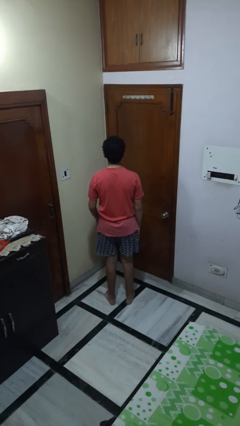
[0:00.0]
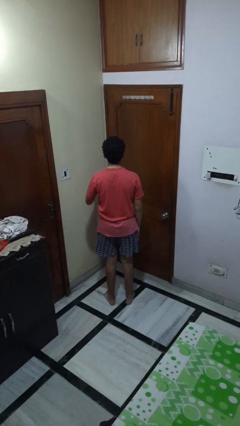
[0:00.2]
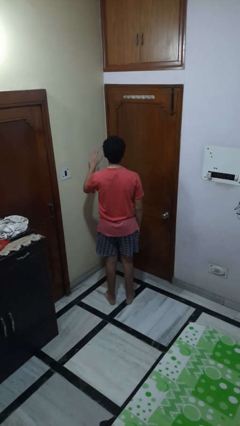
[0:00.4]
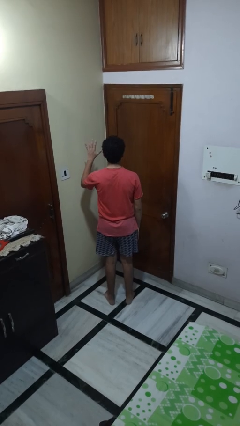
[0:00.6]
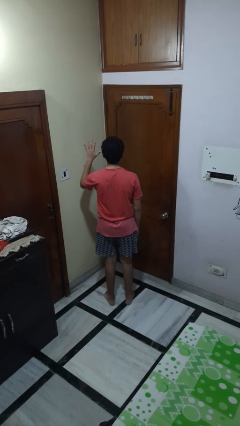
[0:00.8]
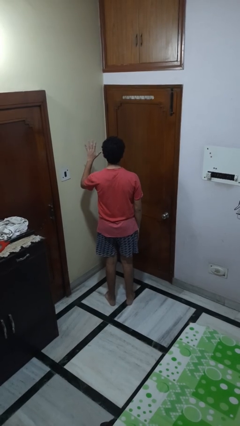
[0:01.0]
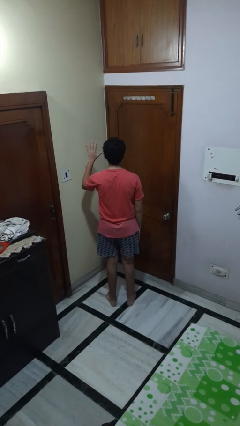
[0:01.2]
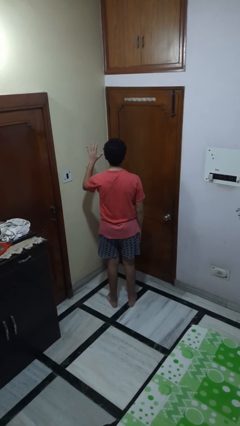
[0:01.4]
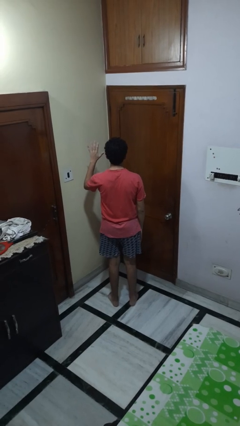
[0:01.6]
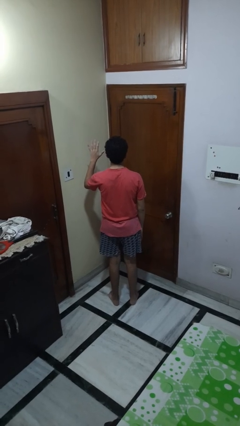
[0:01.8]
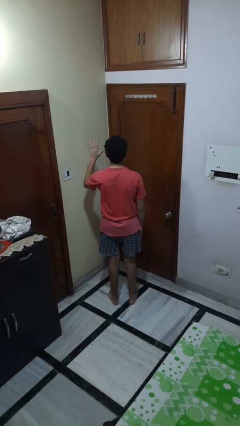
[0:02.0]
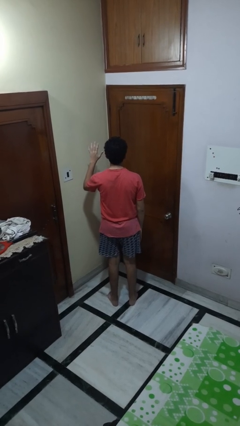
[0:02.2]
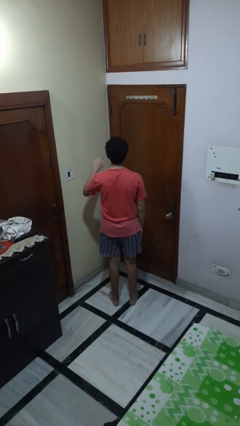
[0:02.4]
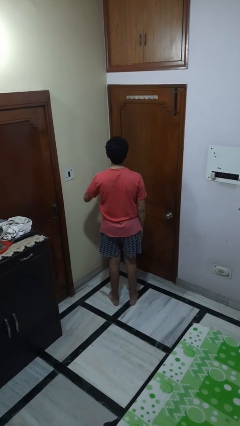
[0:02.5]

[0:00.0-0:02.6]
person gestures number five

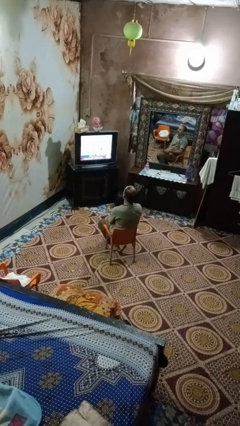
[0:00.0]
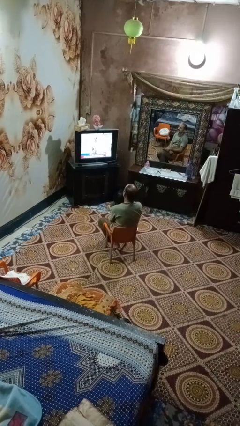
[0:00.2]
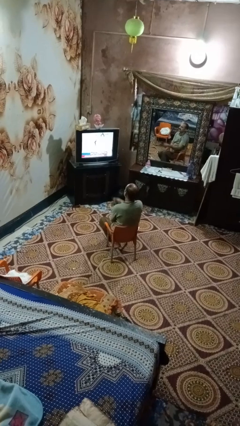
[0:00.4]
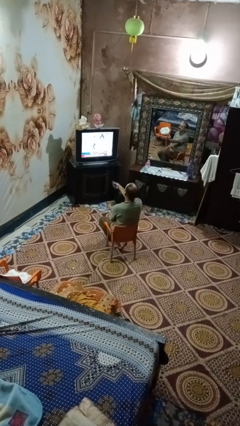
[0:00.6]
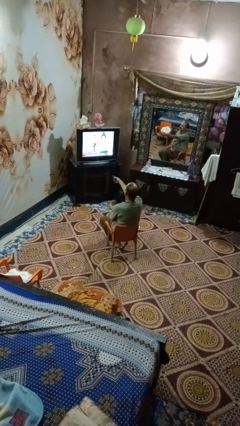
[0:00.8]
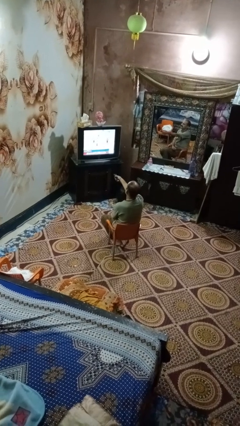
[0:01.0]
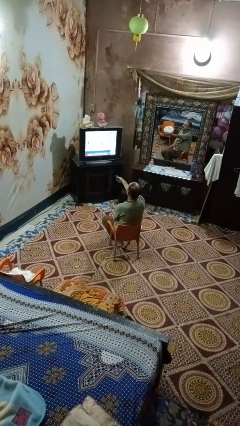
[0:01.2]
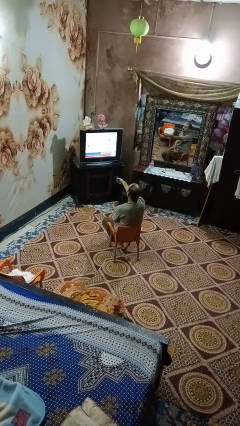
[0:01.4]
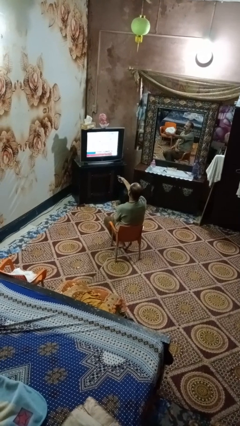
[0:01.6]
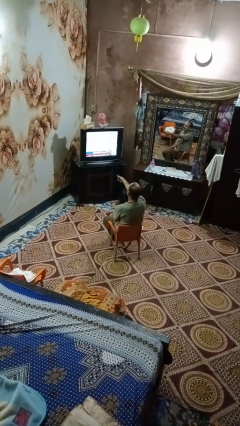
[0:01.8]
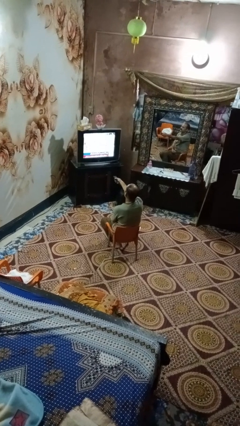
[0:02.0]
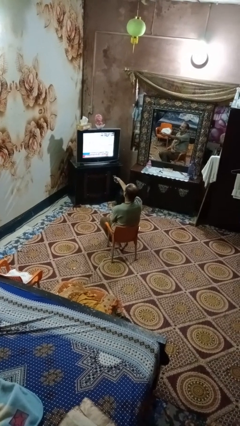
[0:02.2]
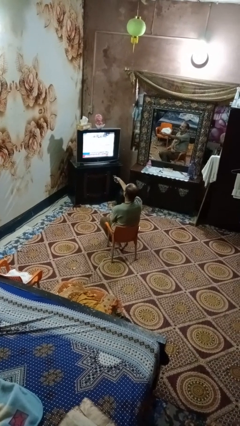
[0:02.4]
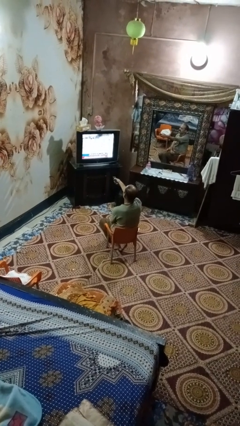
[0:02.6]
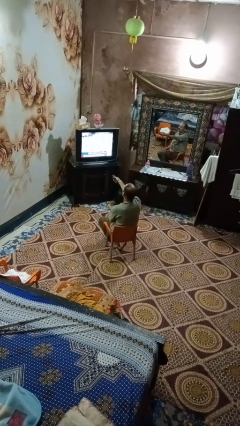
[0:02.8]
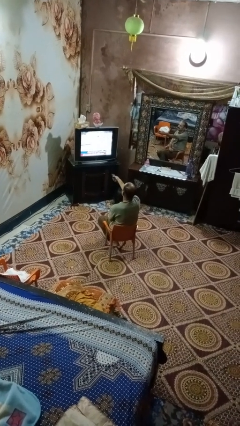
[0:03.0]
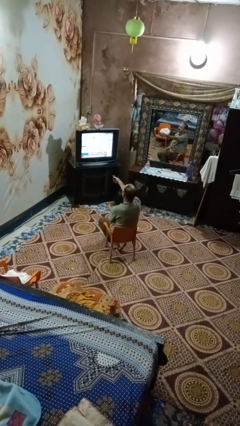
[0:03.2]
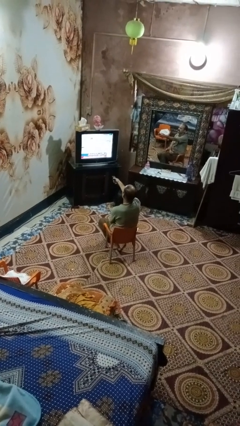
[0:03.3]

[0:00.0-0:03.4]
person uses television remote

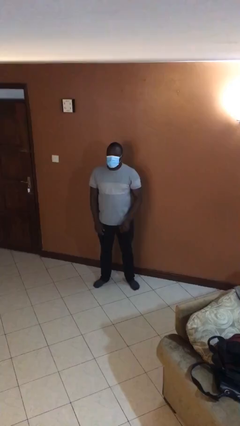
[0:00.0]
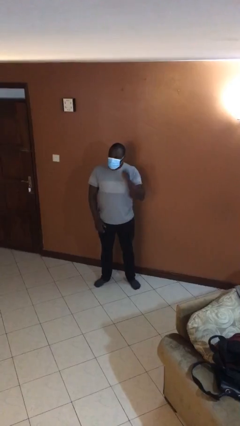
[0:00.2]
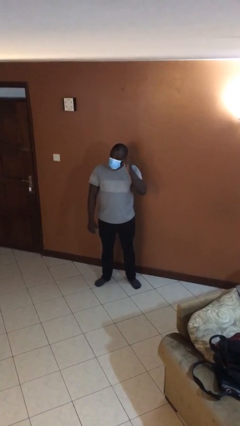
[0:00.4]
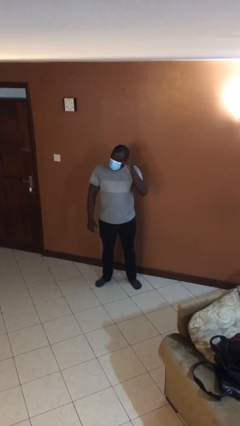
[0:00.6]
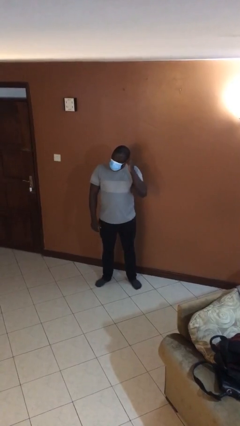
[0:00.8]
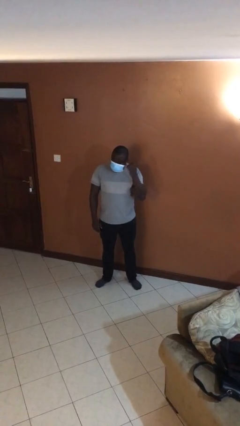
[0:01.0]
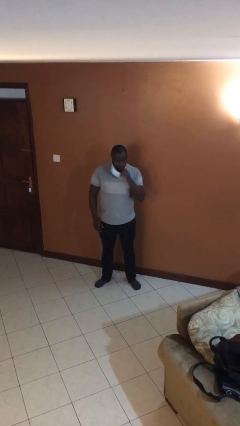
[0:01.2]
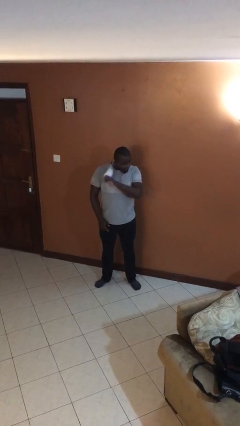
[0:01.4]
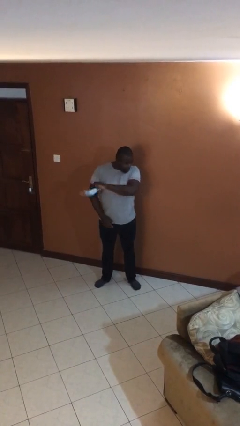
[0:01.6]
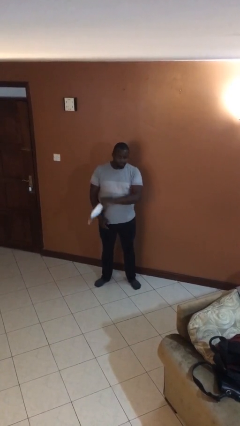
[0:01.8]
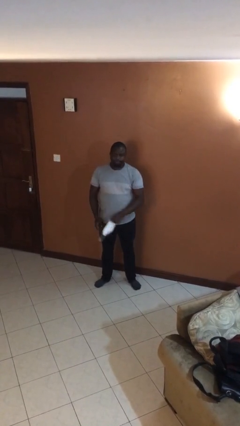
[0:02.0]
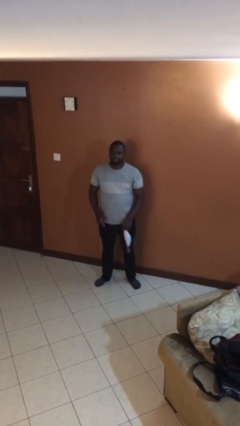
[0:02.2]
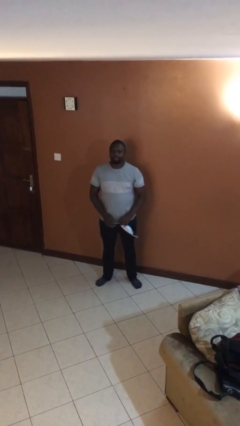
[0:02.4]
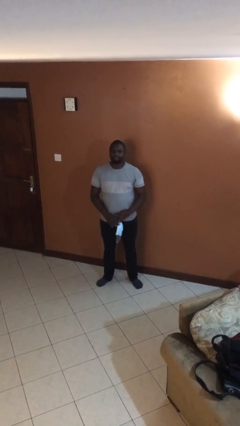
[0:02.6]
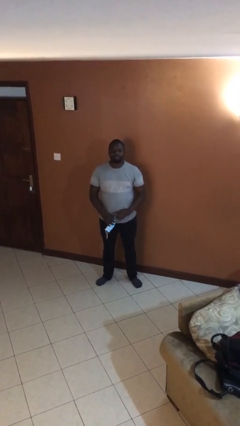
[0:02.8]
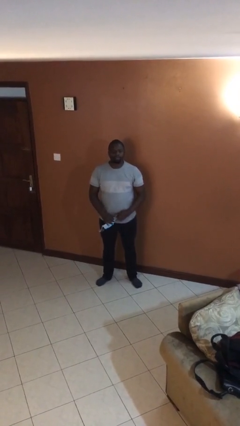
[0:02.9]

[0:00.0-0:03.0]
person takes off facemask

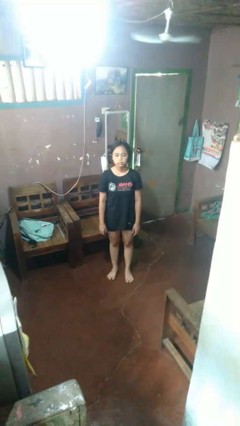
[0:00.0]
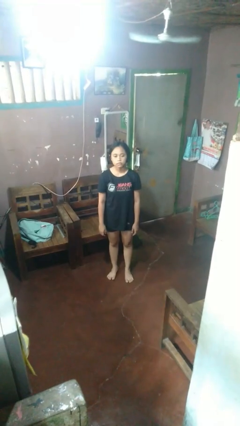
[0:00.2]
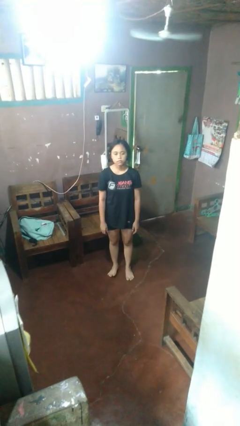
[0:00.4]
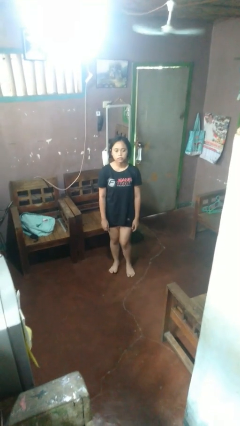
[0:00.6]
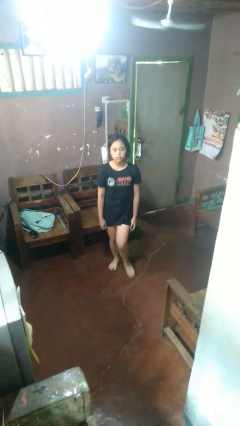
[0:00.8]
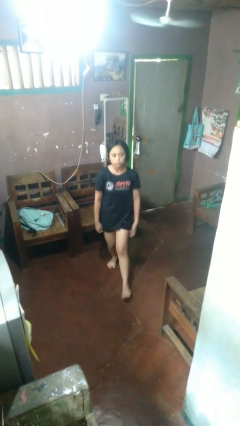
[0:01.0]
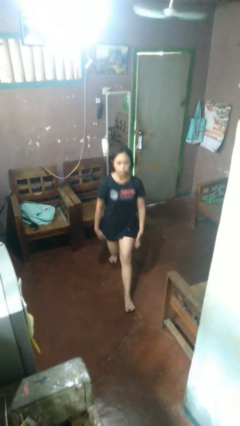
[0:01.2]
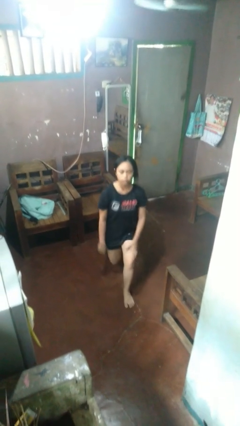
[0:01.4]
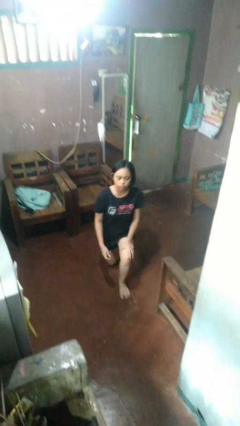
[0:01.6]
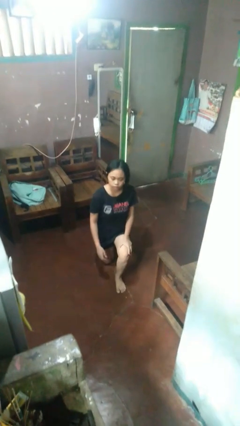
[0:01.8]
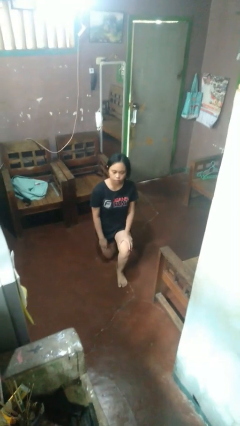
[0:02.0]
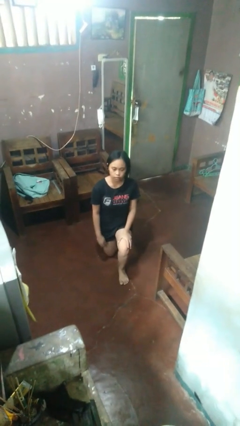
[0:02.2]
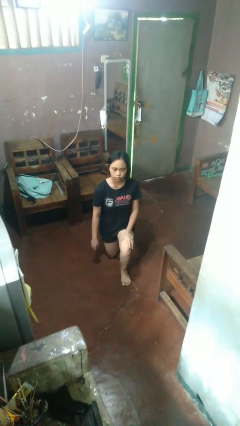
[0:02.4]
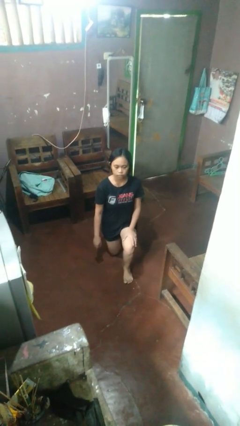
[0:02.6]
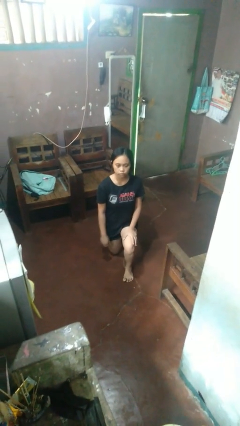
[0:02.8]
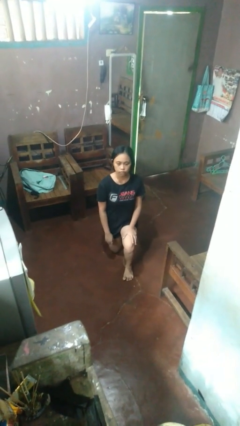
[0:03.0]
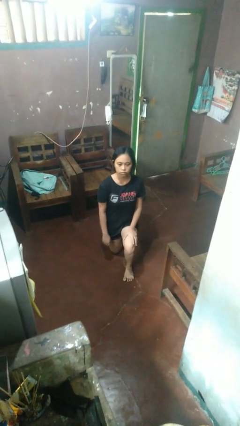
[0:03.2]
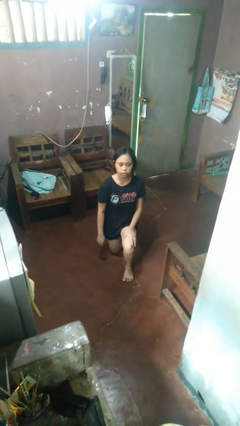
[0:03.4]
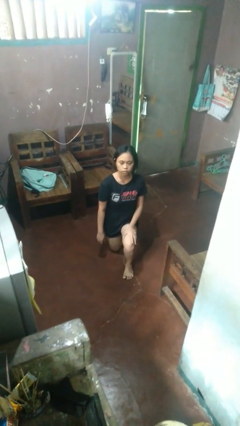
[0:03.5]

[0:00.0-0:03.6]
person kneels

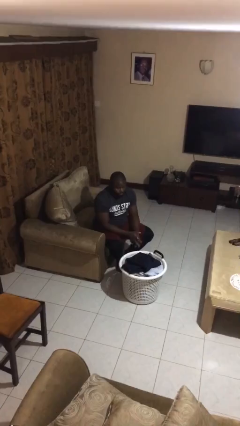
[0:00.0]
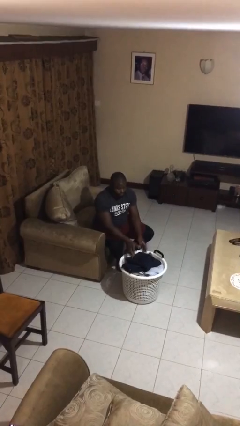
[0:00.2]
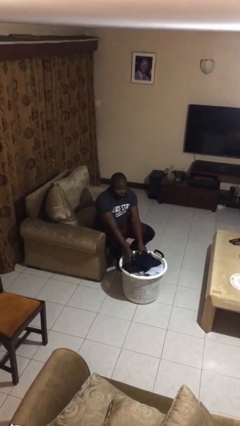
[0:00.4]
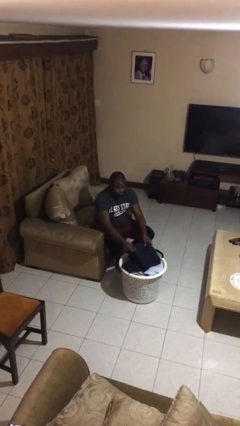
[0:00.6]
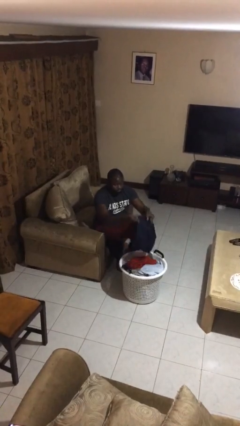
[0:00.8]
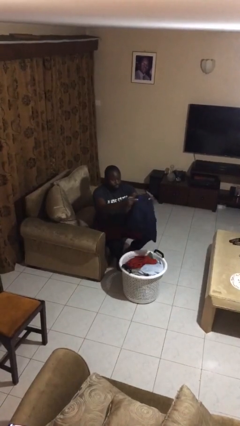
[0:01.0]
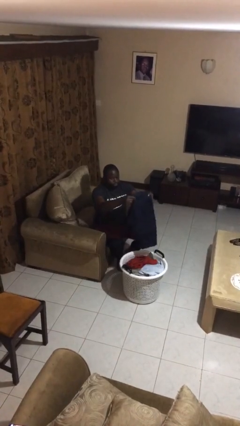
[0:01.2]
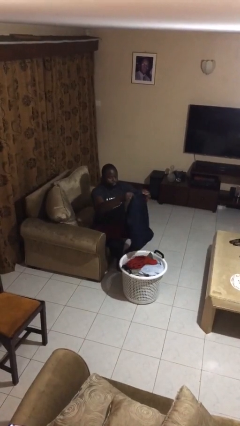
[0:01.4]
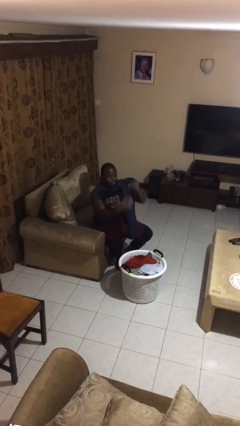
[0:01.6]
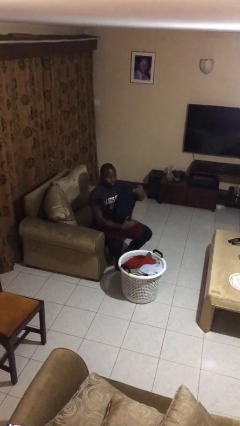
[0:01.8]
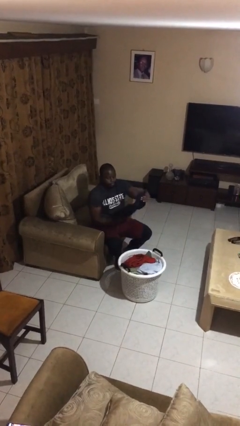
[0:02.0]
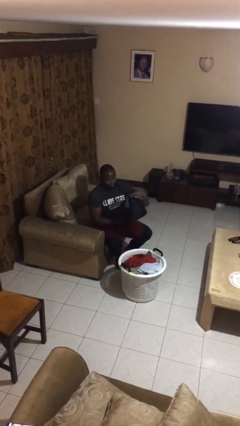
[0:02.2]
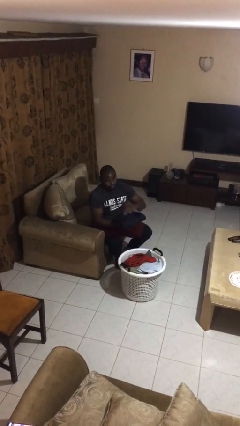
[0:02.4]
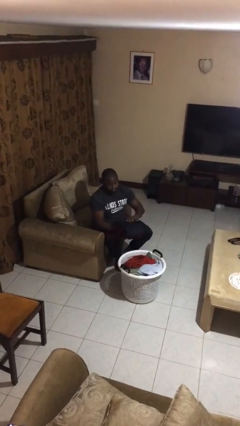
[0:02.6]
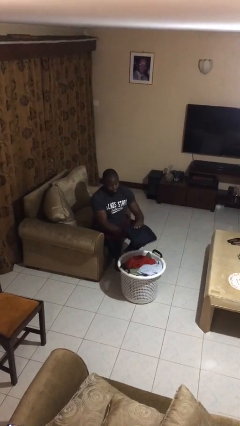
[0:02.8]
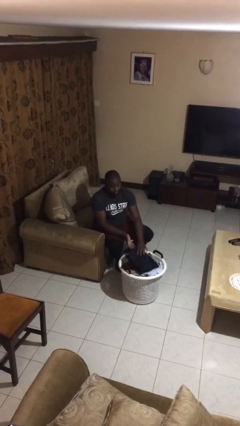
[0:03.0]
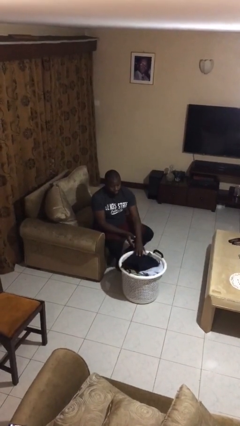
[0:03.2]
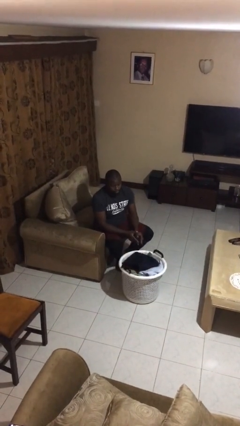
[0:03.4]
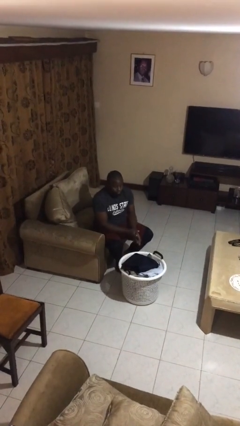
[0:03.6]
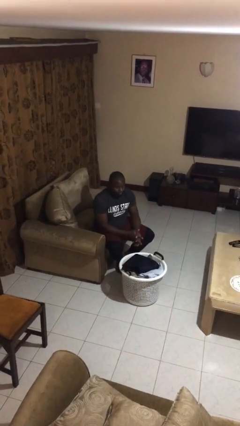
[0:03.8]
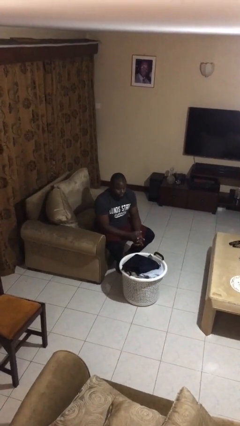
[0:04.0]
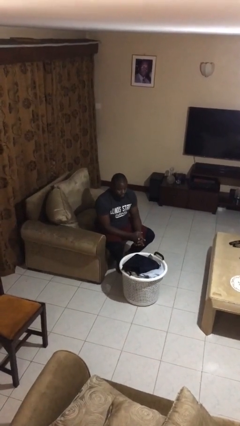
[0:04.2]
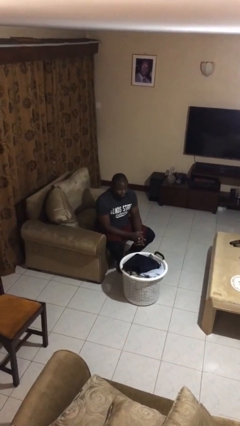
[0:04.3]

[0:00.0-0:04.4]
person folds pants

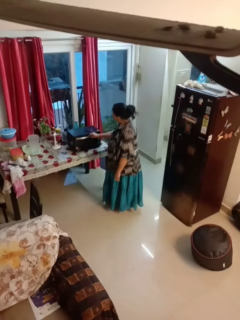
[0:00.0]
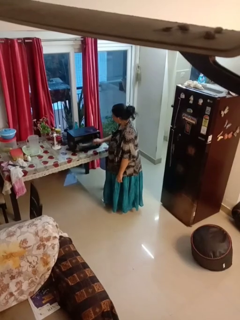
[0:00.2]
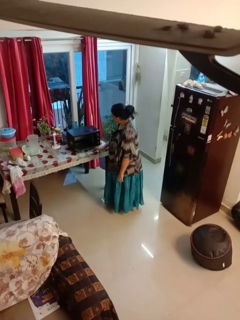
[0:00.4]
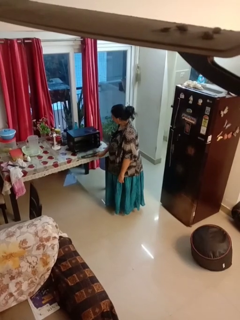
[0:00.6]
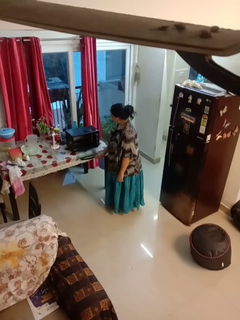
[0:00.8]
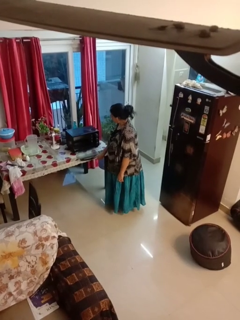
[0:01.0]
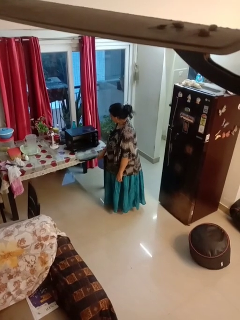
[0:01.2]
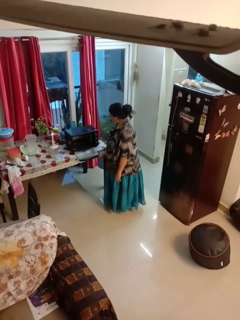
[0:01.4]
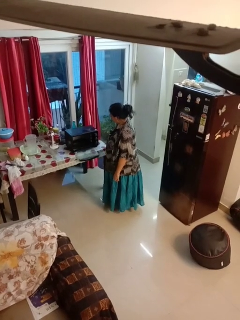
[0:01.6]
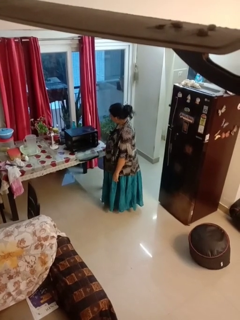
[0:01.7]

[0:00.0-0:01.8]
person opens microwave
